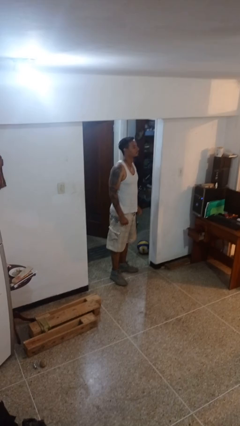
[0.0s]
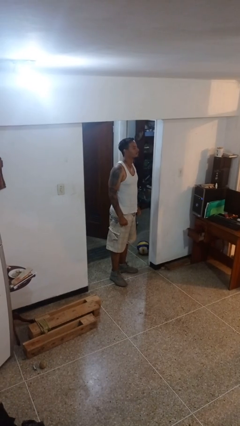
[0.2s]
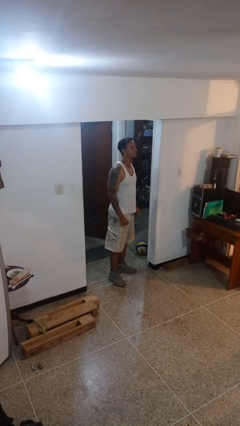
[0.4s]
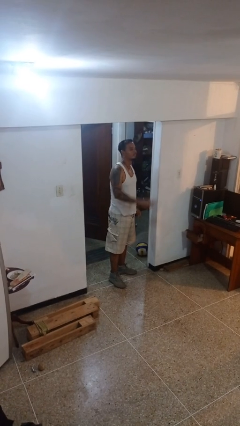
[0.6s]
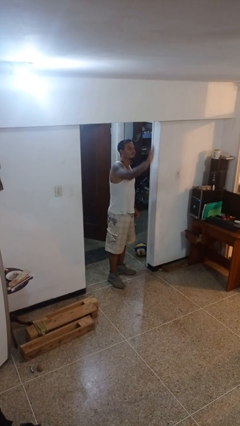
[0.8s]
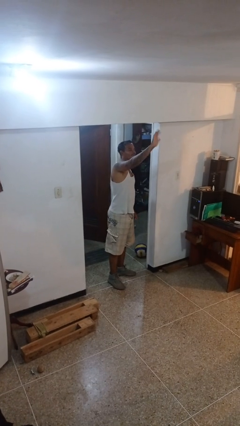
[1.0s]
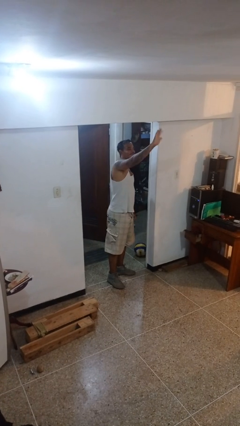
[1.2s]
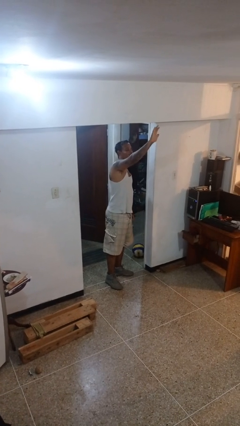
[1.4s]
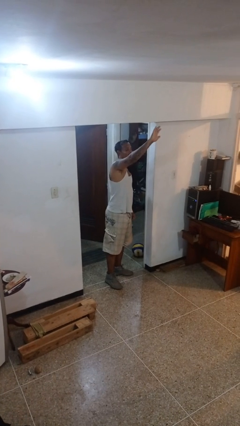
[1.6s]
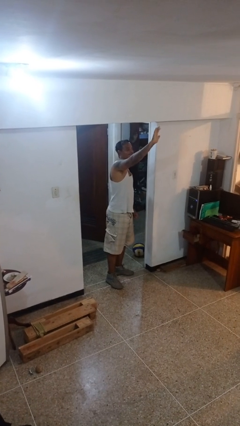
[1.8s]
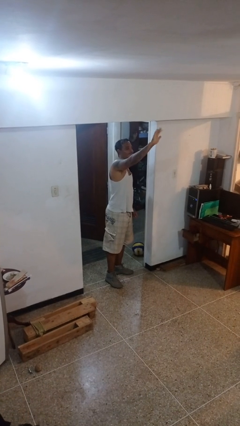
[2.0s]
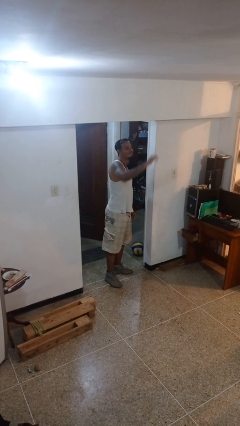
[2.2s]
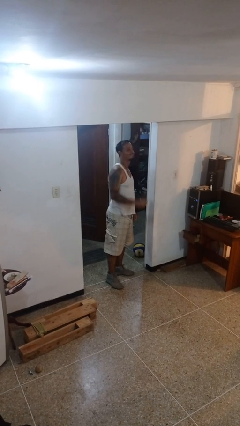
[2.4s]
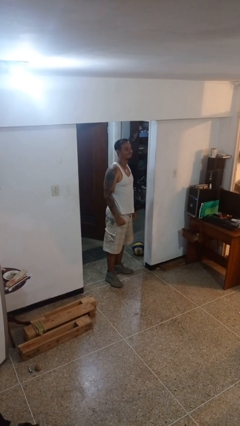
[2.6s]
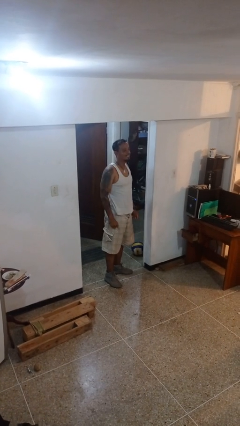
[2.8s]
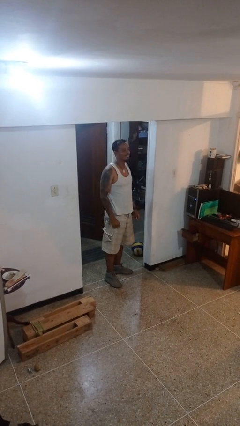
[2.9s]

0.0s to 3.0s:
person waves at person

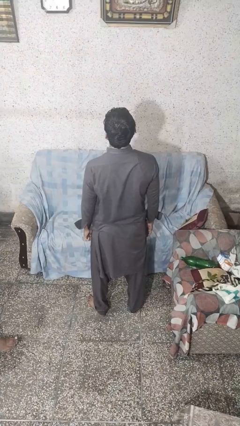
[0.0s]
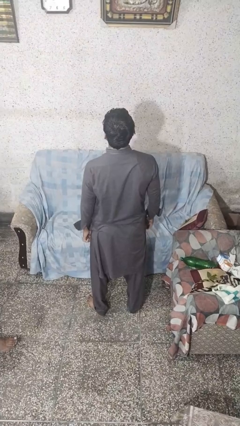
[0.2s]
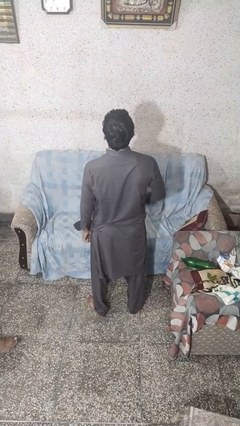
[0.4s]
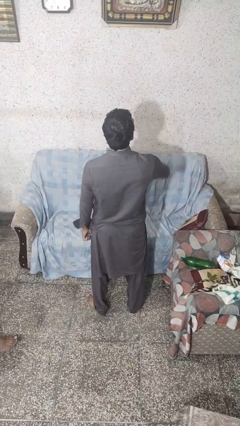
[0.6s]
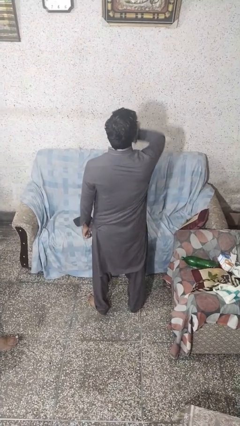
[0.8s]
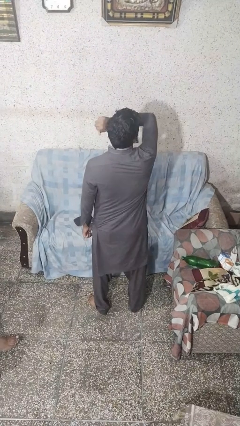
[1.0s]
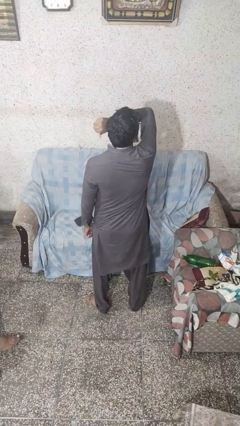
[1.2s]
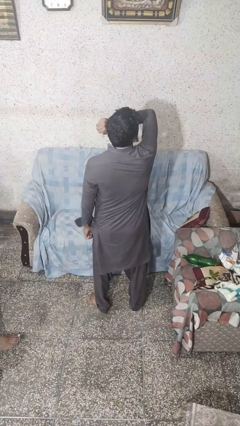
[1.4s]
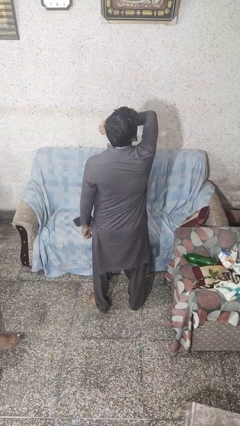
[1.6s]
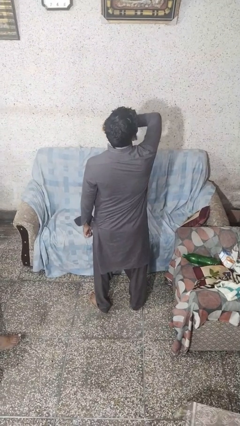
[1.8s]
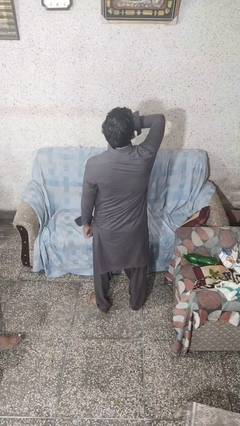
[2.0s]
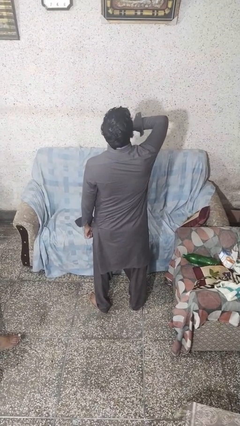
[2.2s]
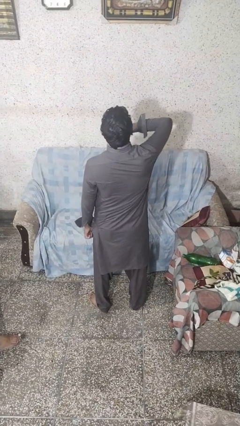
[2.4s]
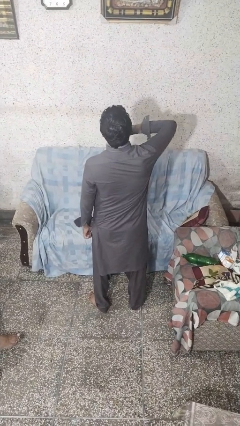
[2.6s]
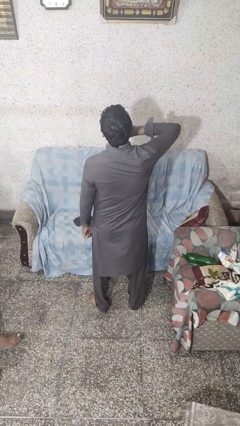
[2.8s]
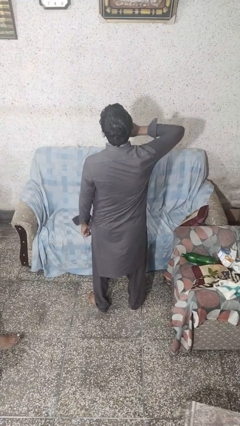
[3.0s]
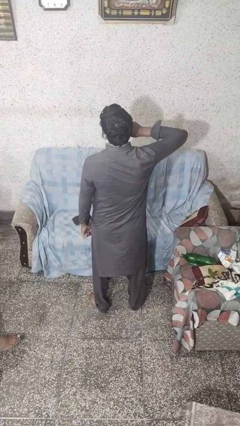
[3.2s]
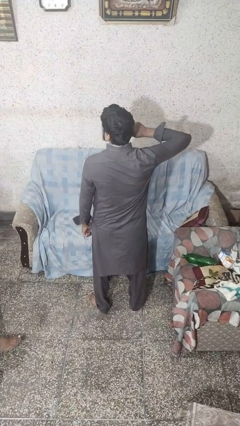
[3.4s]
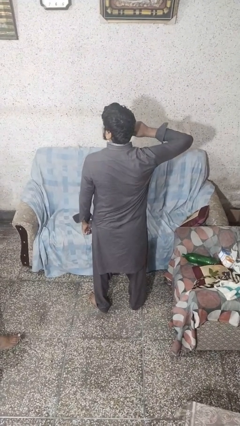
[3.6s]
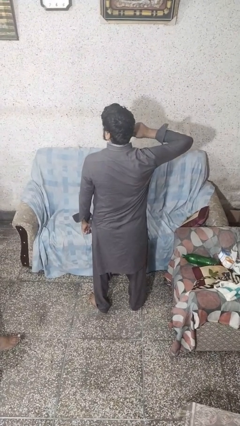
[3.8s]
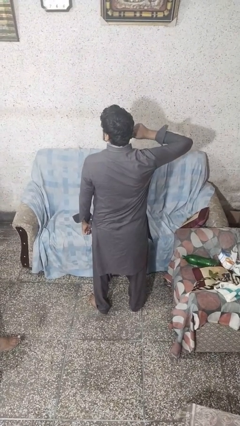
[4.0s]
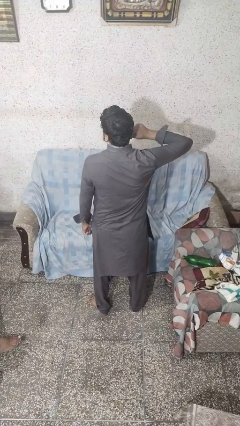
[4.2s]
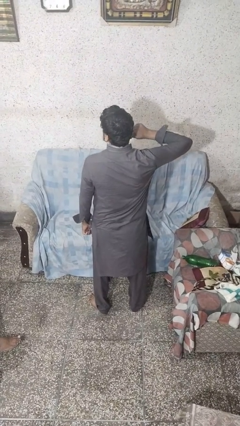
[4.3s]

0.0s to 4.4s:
person gestures cut

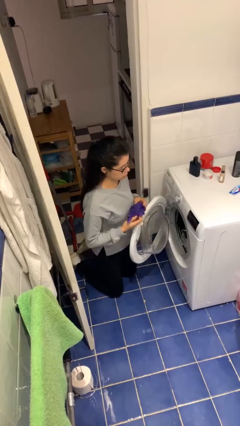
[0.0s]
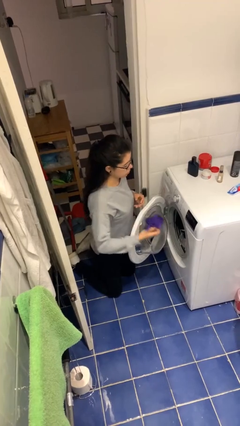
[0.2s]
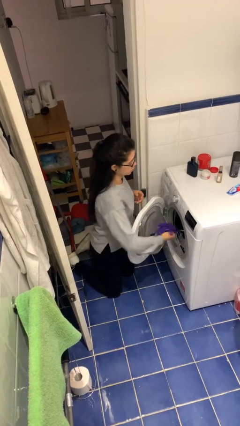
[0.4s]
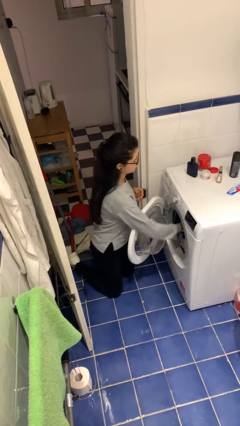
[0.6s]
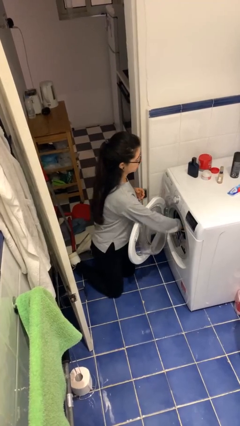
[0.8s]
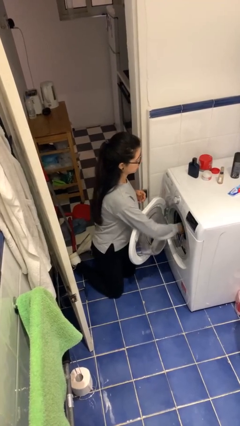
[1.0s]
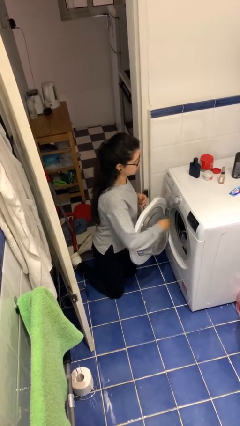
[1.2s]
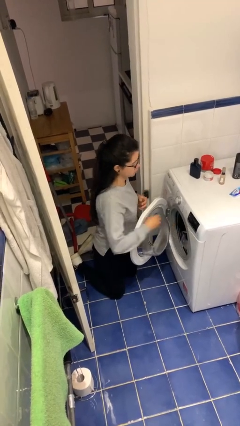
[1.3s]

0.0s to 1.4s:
person loads clotheswasher

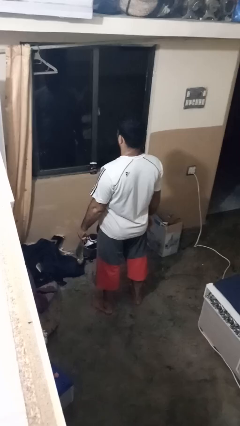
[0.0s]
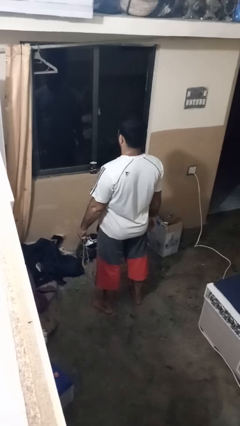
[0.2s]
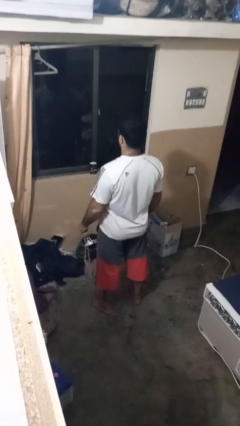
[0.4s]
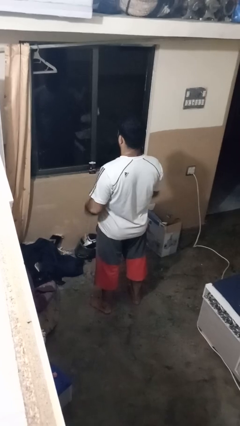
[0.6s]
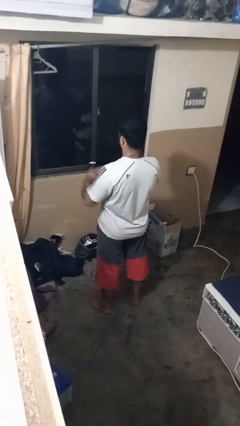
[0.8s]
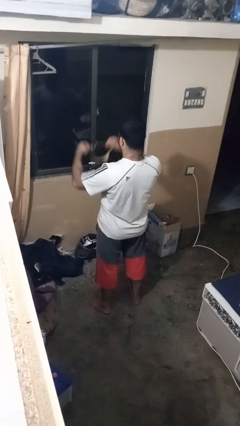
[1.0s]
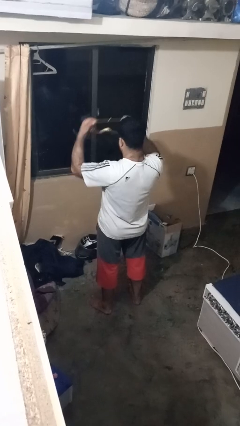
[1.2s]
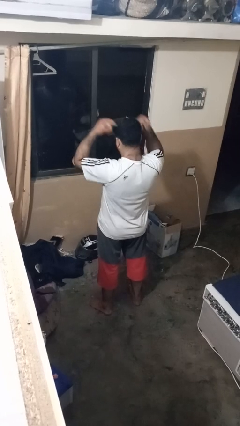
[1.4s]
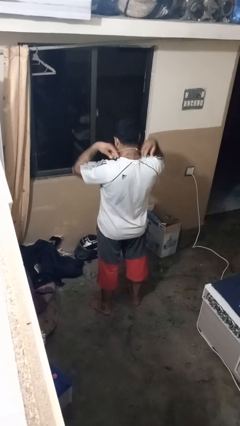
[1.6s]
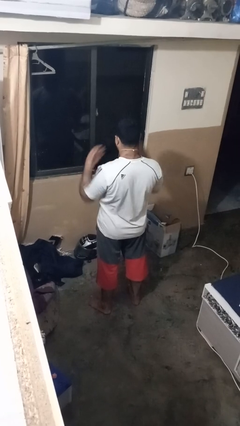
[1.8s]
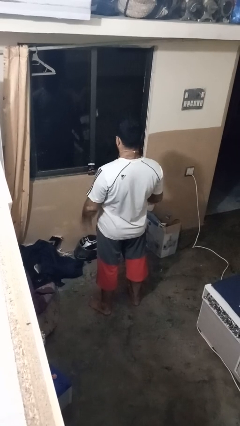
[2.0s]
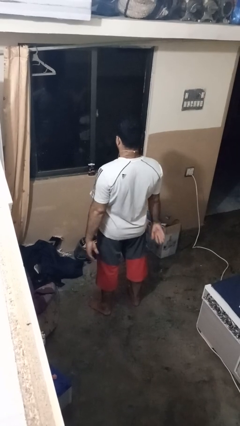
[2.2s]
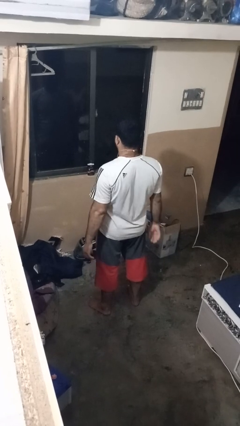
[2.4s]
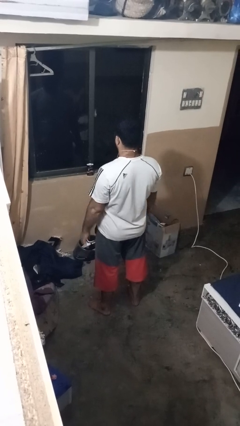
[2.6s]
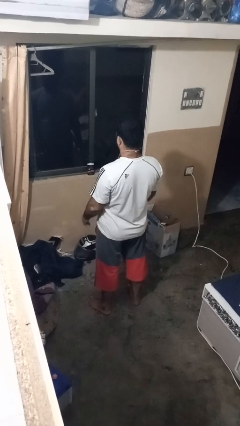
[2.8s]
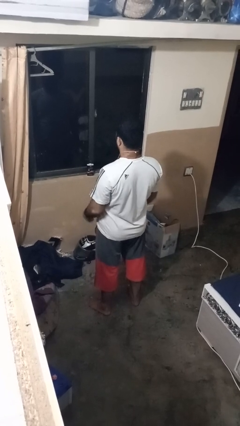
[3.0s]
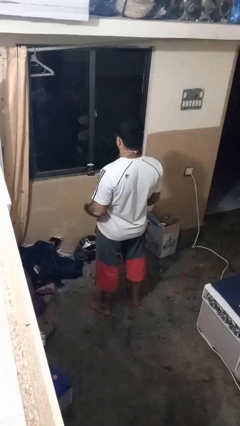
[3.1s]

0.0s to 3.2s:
person puts on necklace

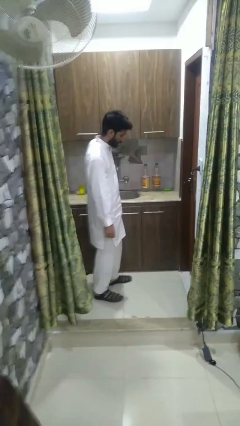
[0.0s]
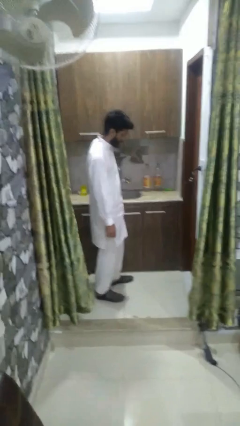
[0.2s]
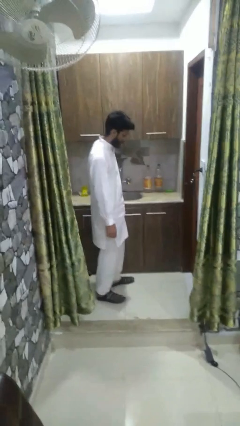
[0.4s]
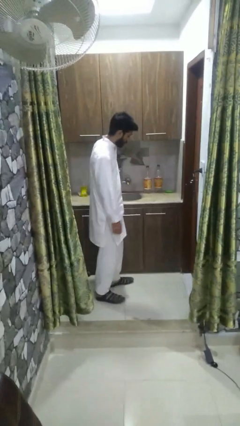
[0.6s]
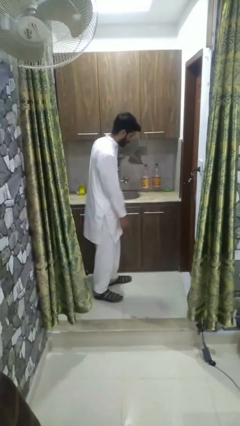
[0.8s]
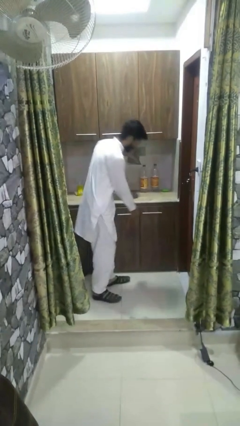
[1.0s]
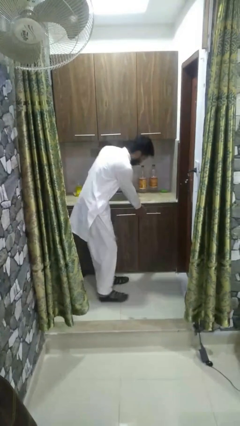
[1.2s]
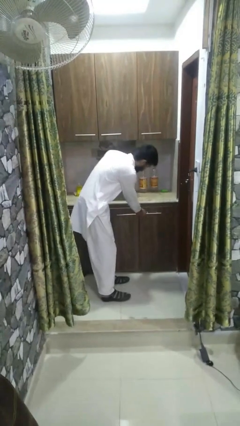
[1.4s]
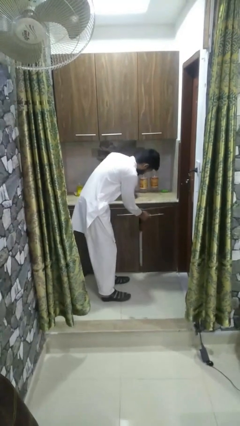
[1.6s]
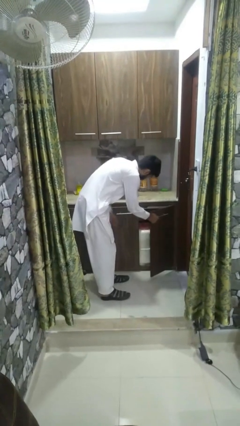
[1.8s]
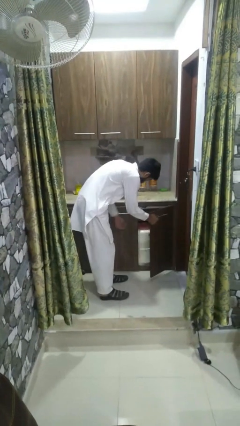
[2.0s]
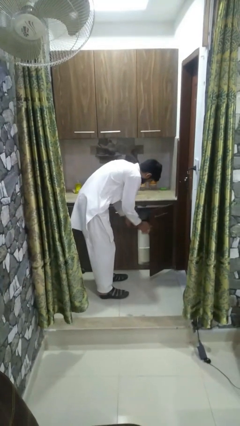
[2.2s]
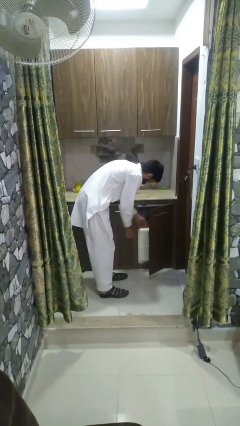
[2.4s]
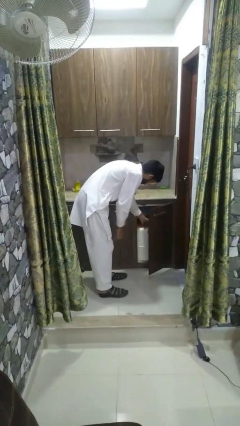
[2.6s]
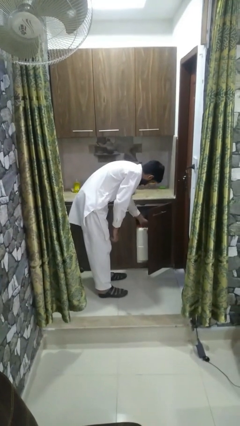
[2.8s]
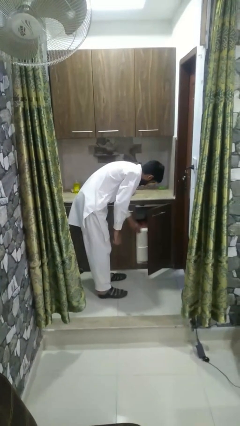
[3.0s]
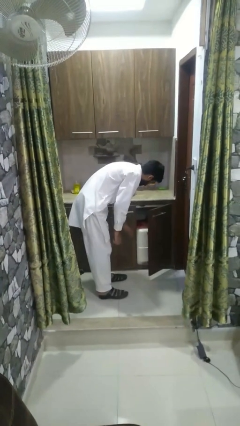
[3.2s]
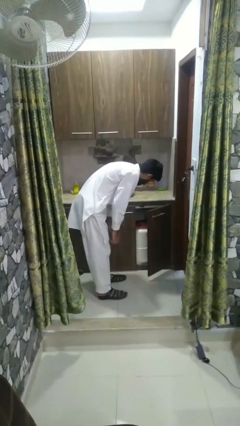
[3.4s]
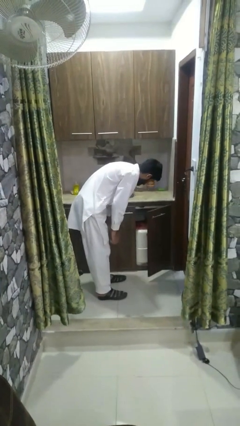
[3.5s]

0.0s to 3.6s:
person opens oven door

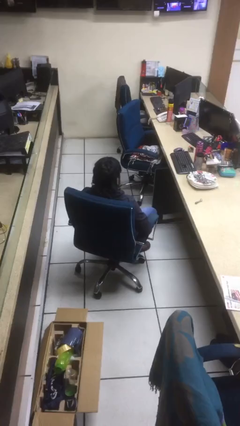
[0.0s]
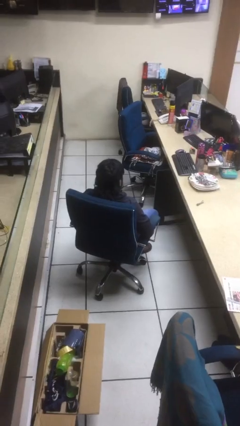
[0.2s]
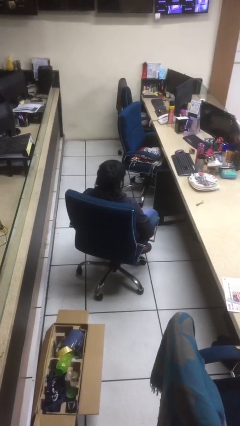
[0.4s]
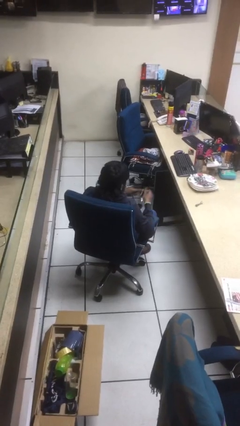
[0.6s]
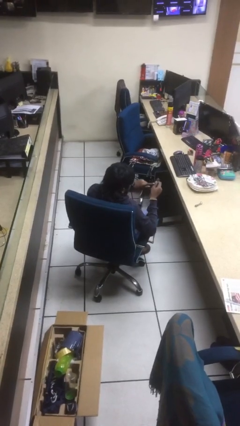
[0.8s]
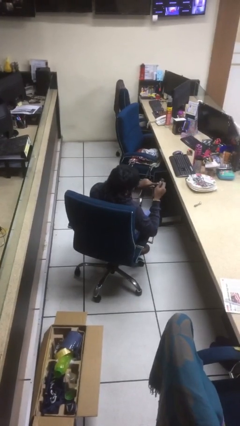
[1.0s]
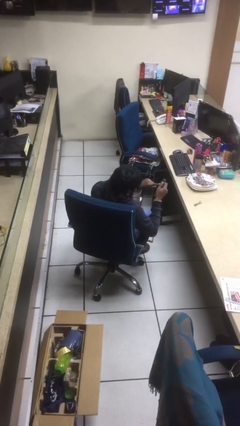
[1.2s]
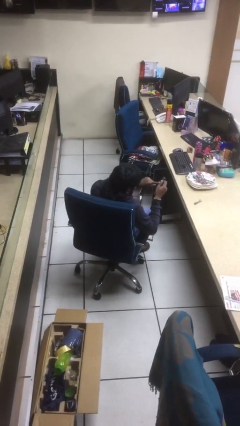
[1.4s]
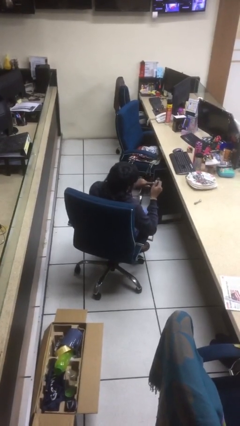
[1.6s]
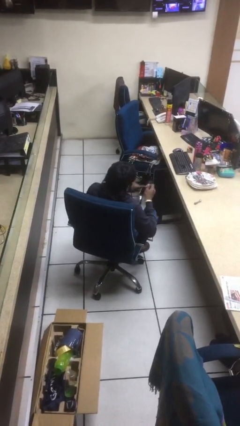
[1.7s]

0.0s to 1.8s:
person files fingernails
